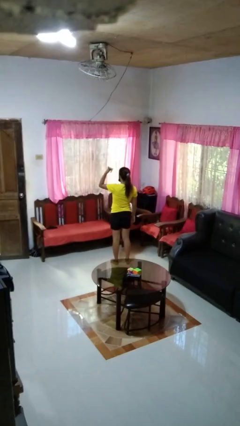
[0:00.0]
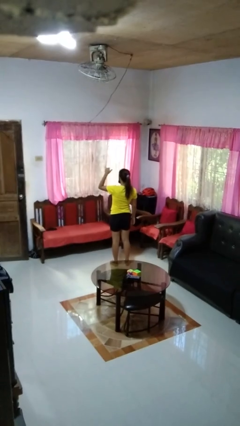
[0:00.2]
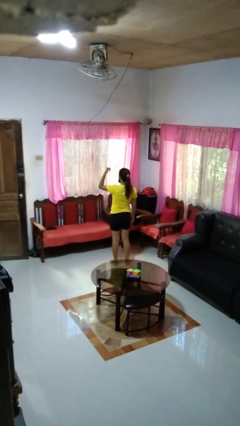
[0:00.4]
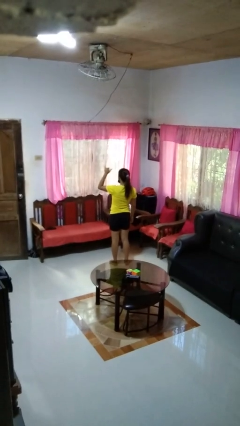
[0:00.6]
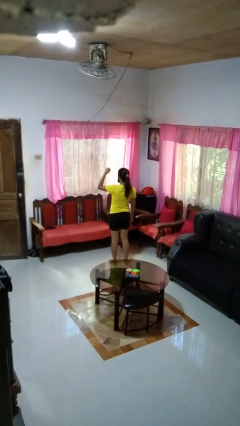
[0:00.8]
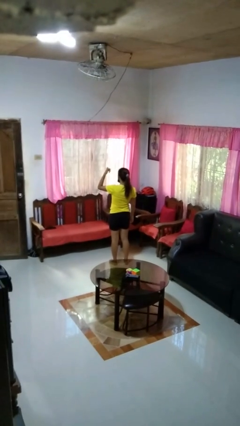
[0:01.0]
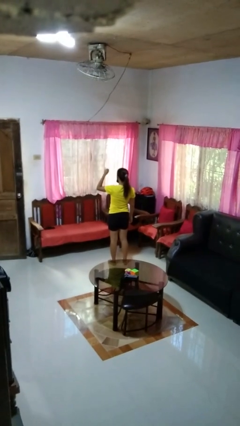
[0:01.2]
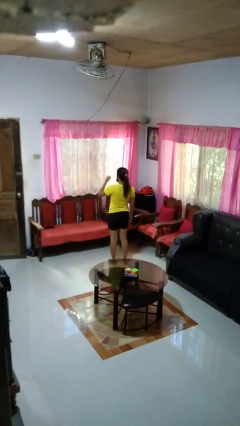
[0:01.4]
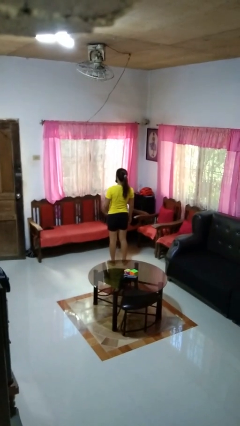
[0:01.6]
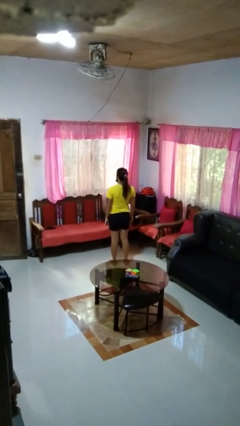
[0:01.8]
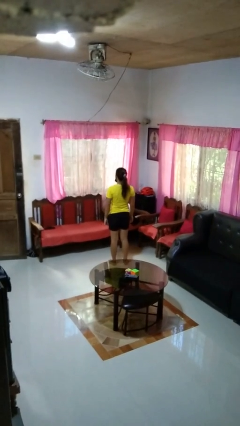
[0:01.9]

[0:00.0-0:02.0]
person gestures hang loose

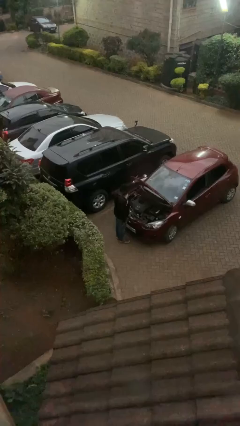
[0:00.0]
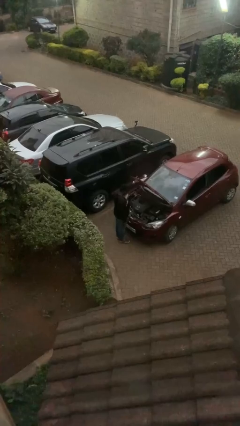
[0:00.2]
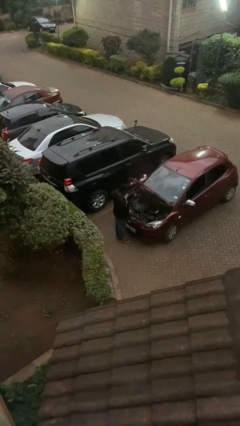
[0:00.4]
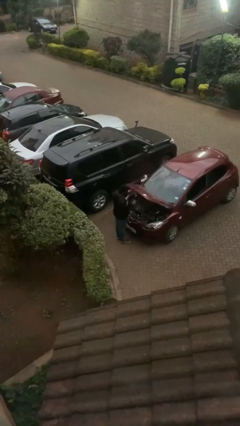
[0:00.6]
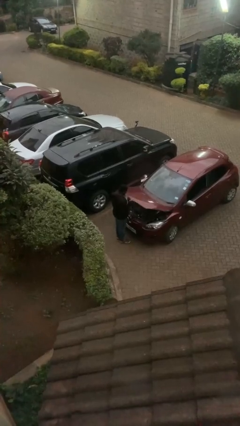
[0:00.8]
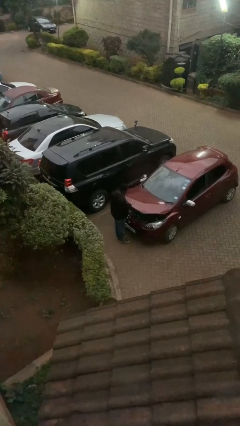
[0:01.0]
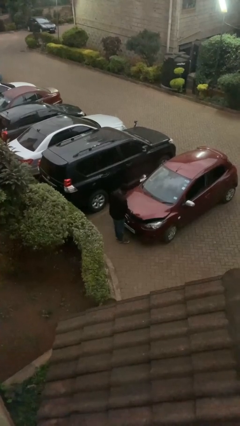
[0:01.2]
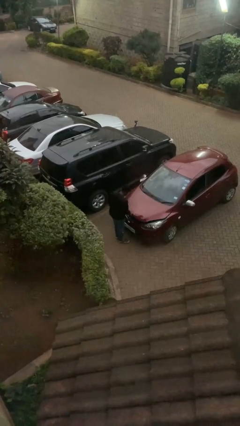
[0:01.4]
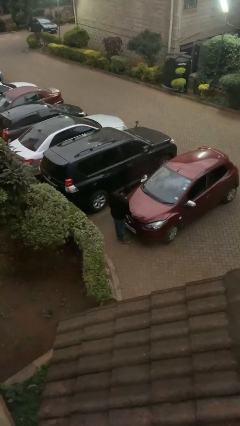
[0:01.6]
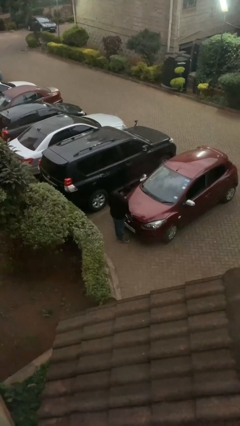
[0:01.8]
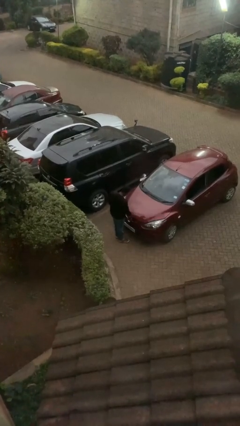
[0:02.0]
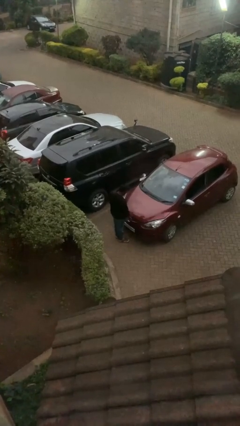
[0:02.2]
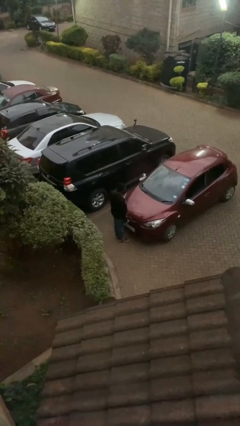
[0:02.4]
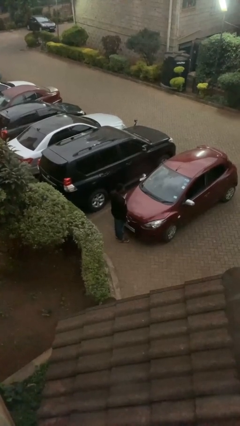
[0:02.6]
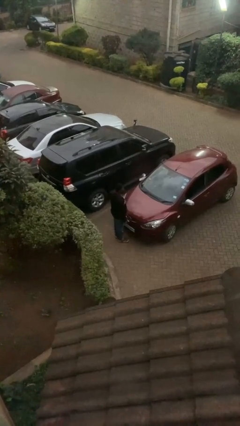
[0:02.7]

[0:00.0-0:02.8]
person closes car hood

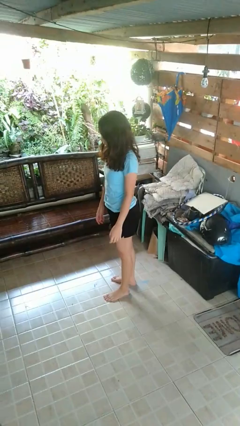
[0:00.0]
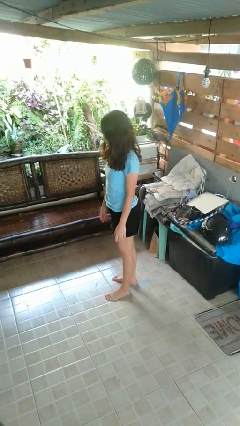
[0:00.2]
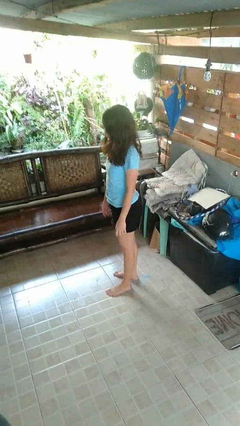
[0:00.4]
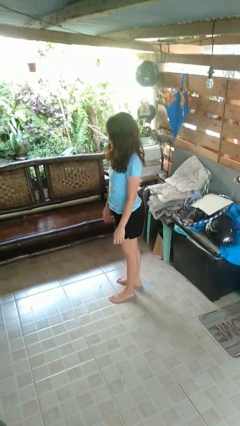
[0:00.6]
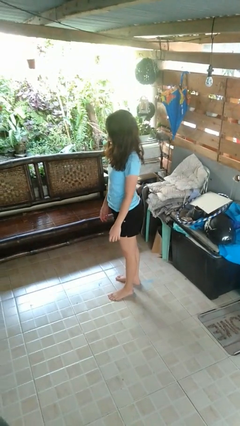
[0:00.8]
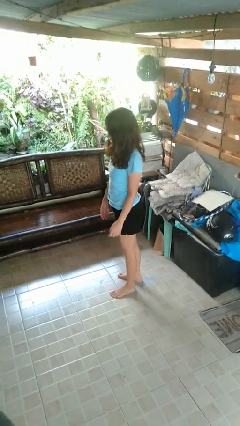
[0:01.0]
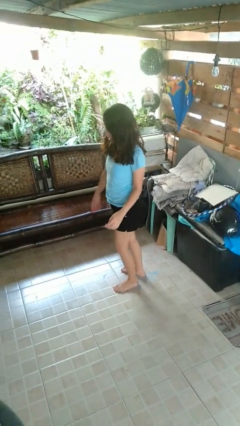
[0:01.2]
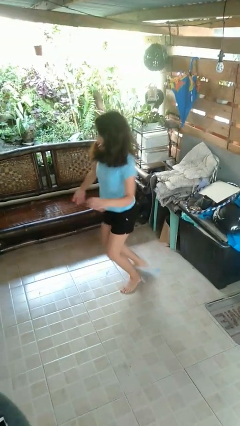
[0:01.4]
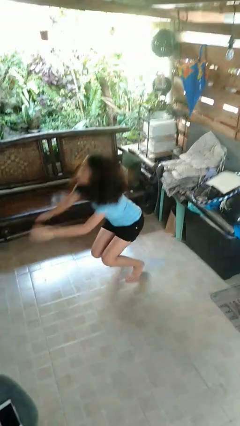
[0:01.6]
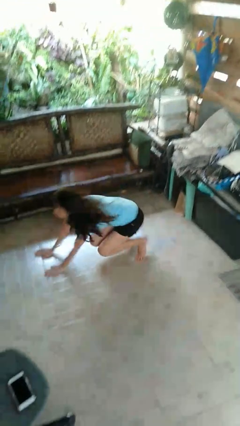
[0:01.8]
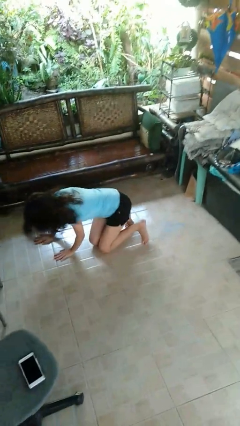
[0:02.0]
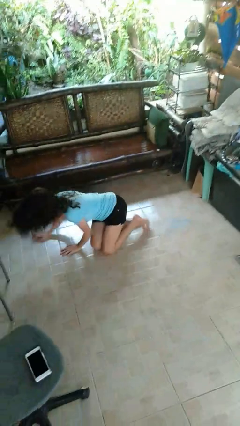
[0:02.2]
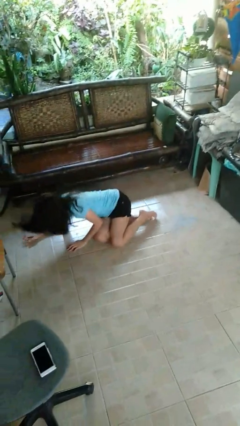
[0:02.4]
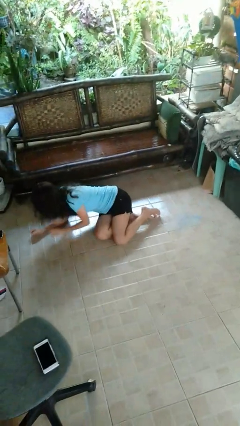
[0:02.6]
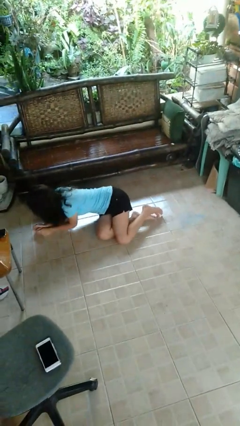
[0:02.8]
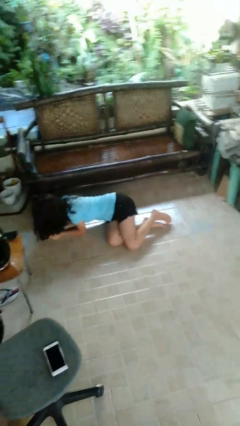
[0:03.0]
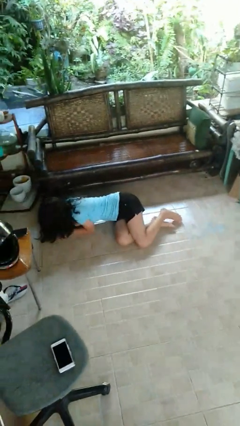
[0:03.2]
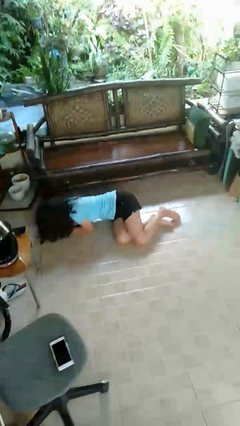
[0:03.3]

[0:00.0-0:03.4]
person falls while standing

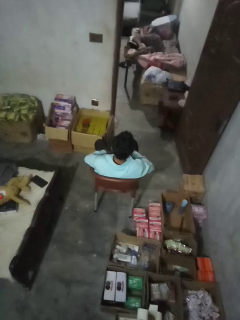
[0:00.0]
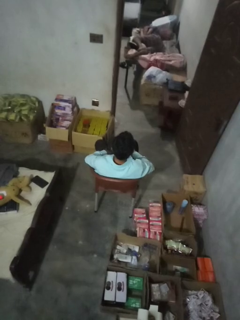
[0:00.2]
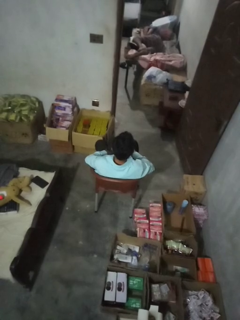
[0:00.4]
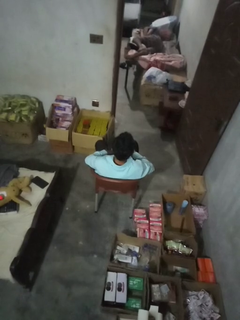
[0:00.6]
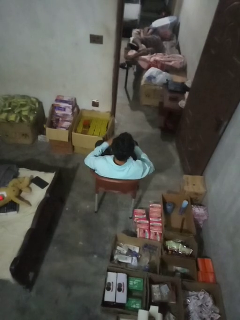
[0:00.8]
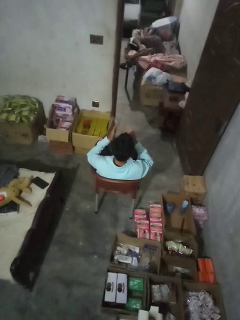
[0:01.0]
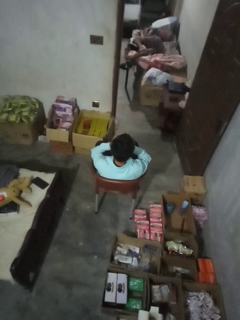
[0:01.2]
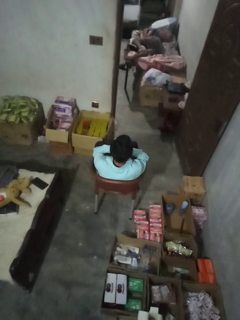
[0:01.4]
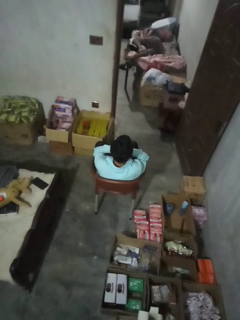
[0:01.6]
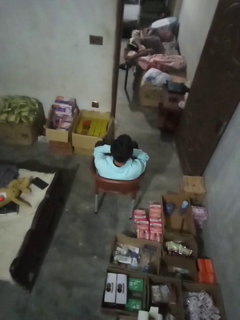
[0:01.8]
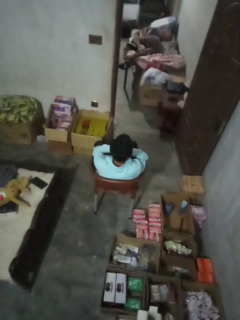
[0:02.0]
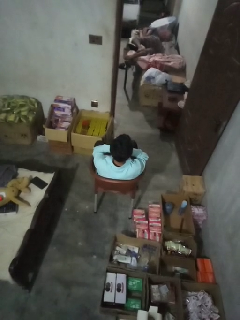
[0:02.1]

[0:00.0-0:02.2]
person covers face with hands

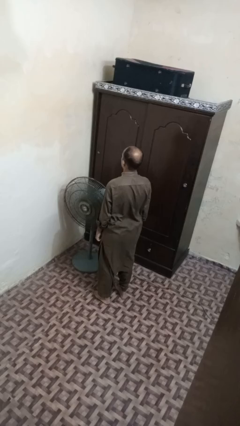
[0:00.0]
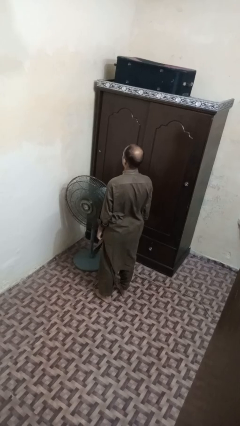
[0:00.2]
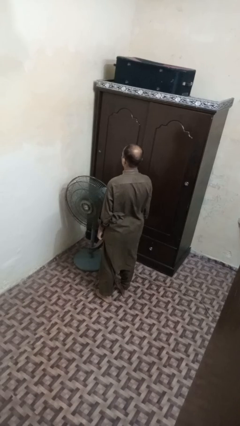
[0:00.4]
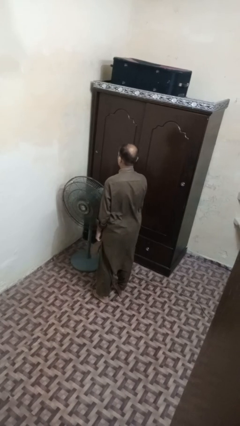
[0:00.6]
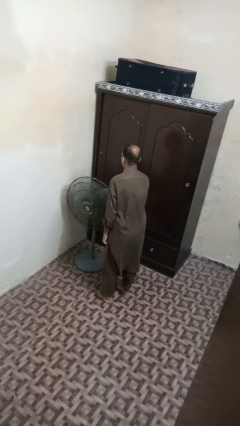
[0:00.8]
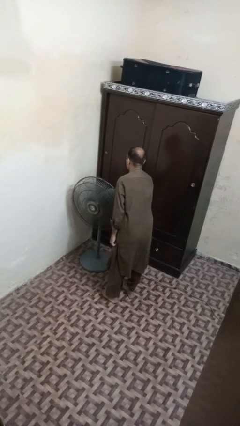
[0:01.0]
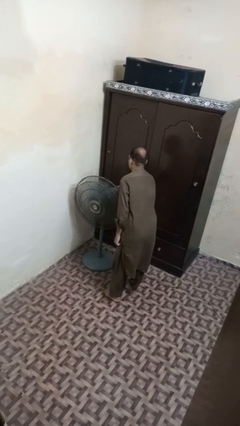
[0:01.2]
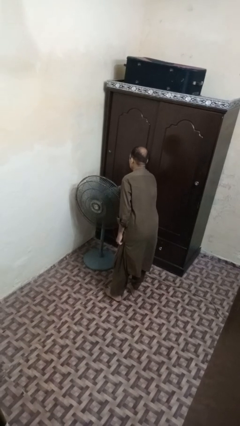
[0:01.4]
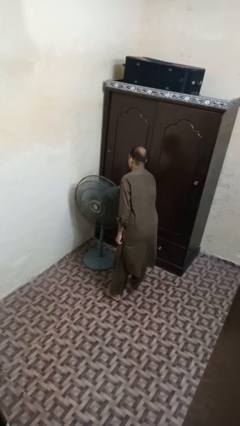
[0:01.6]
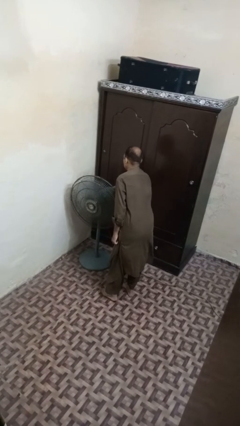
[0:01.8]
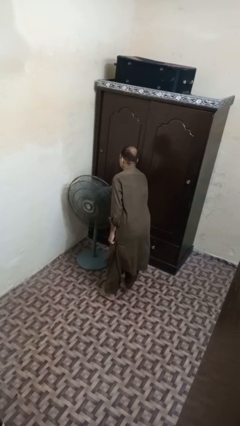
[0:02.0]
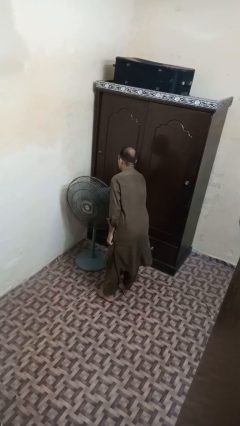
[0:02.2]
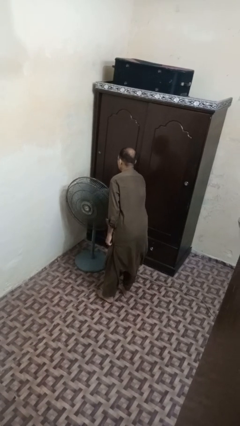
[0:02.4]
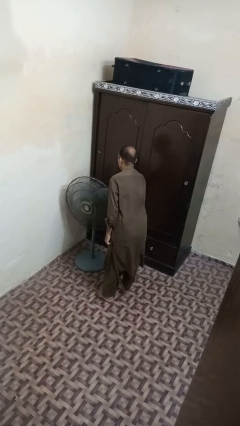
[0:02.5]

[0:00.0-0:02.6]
person turns off fan

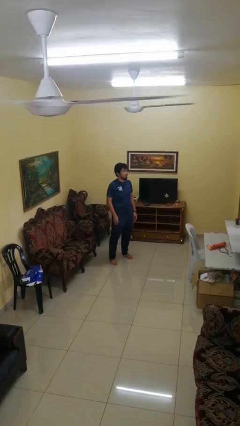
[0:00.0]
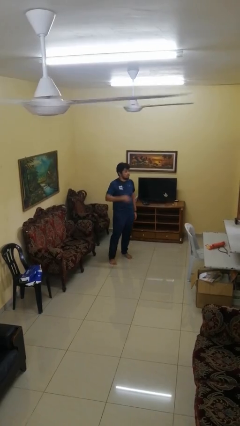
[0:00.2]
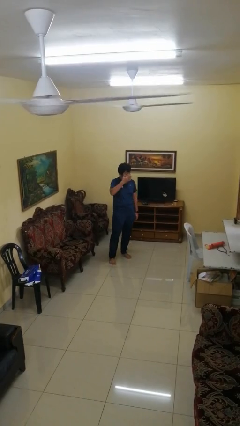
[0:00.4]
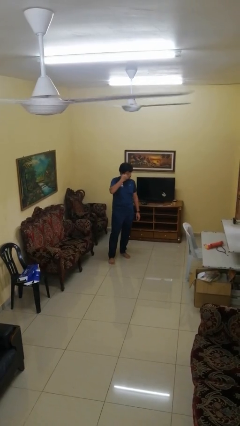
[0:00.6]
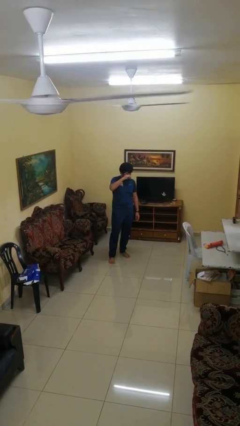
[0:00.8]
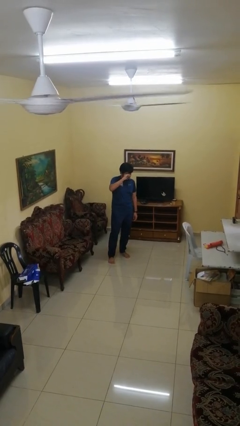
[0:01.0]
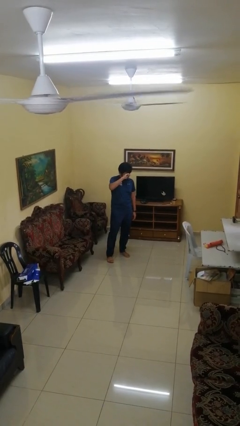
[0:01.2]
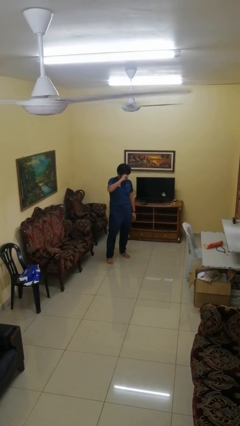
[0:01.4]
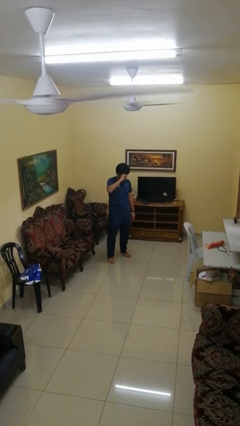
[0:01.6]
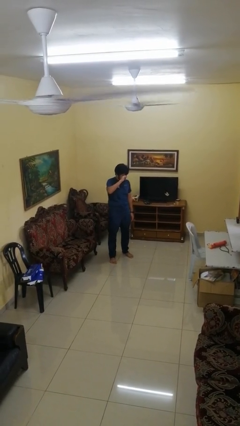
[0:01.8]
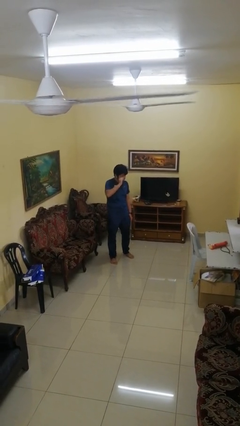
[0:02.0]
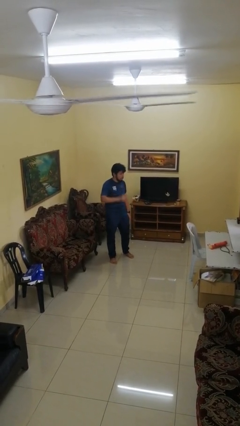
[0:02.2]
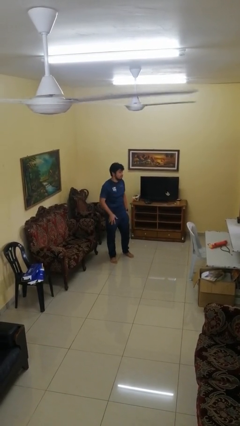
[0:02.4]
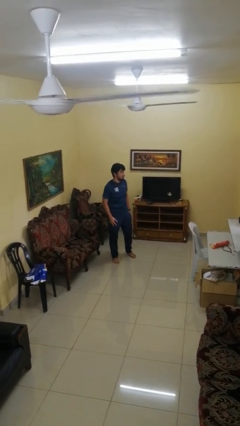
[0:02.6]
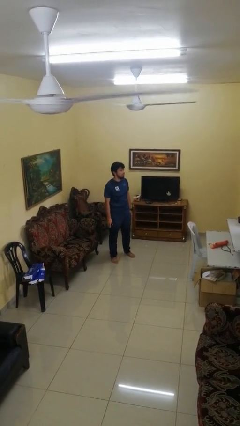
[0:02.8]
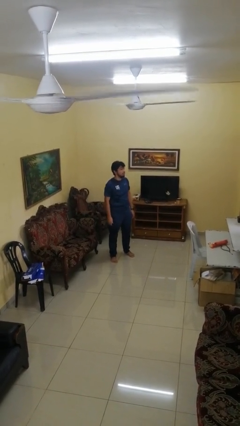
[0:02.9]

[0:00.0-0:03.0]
person scratches face

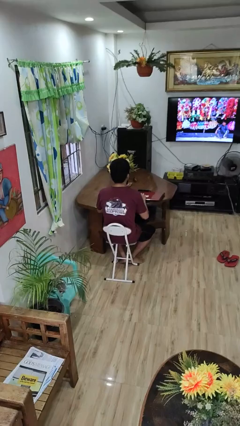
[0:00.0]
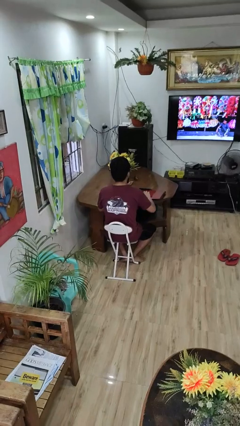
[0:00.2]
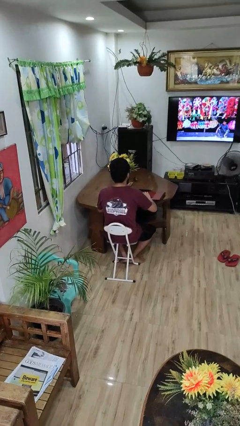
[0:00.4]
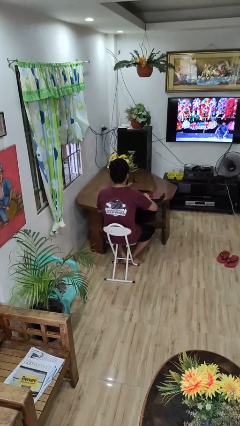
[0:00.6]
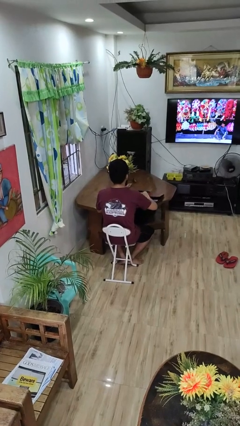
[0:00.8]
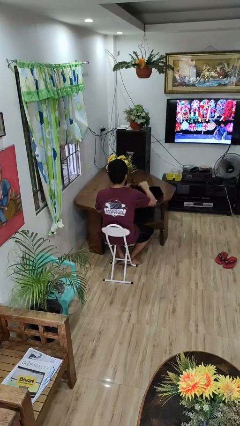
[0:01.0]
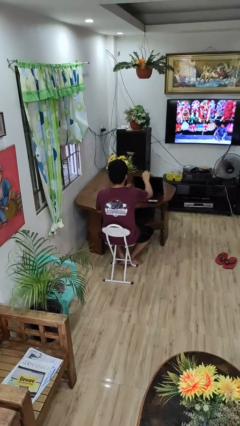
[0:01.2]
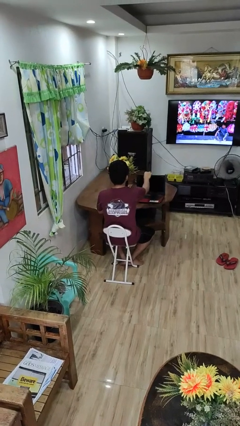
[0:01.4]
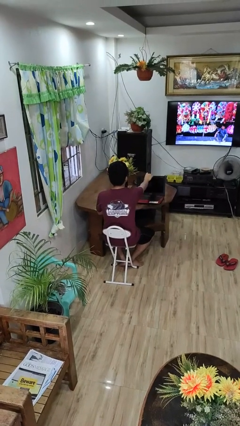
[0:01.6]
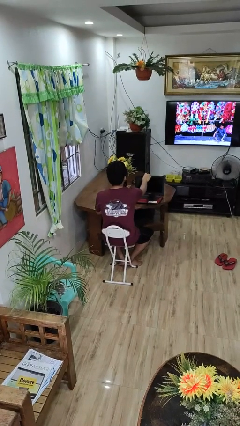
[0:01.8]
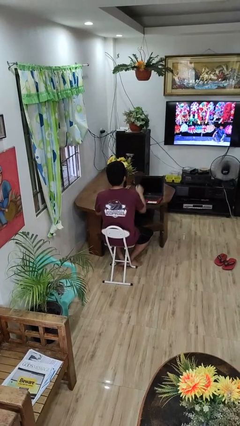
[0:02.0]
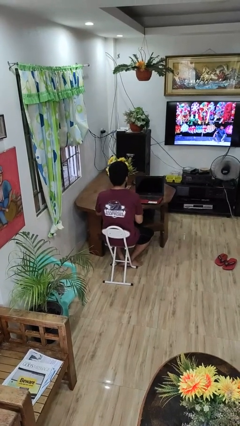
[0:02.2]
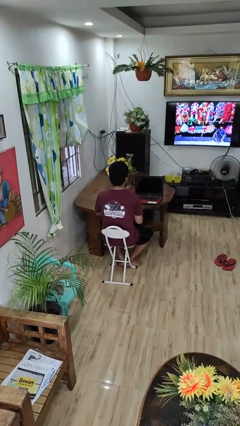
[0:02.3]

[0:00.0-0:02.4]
person opens laptop
